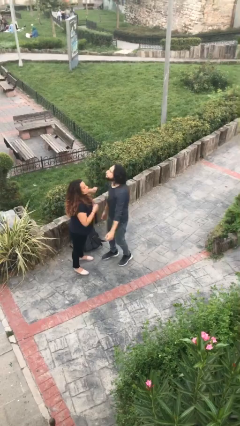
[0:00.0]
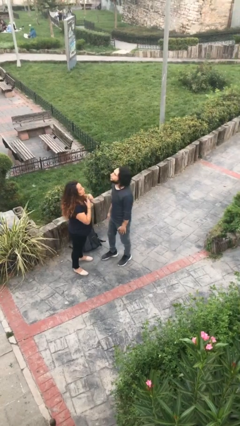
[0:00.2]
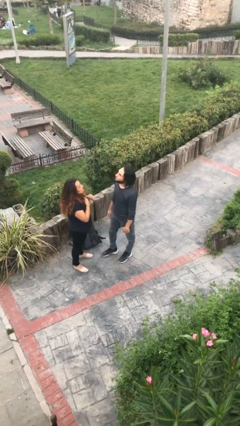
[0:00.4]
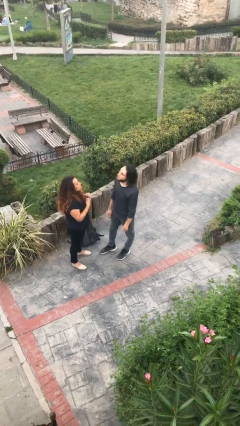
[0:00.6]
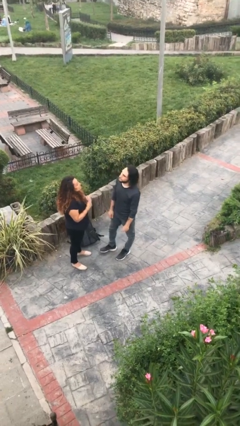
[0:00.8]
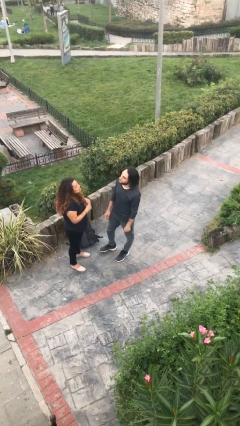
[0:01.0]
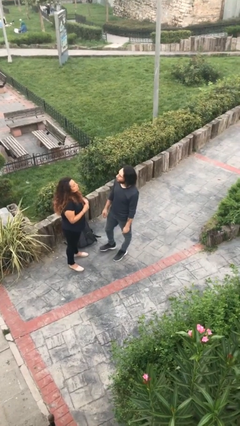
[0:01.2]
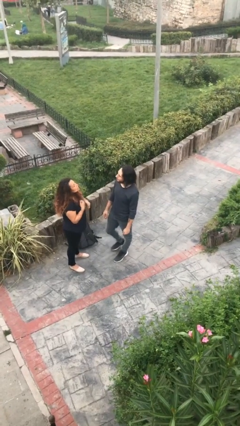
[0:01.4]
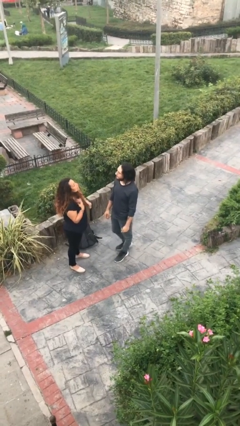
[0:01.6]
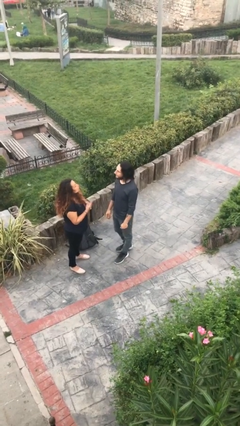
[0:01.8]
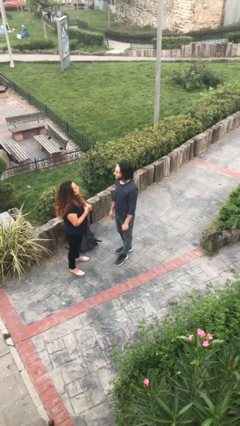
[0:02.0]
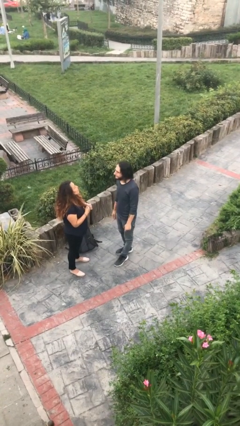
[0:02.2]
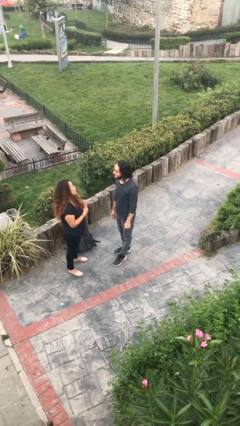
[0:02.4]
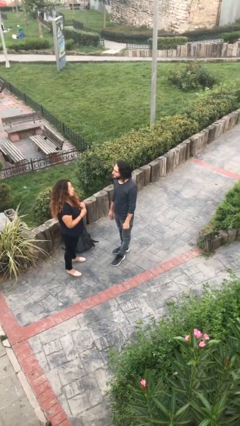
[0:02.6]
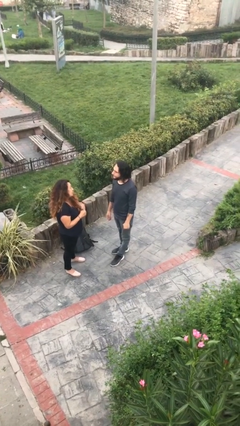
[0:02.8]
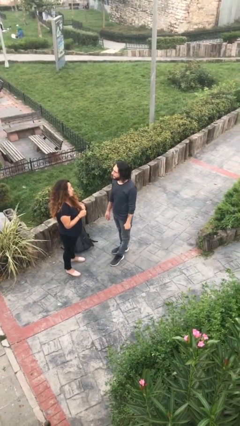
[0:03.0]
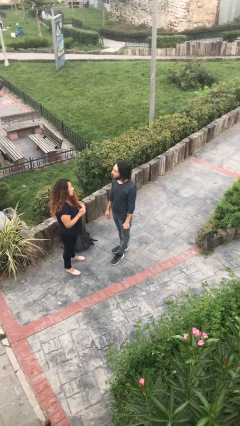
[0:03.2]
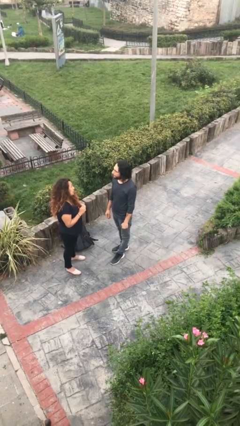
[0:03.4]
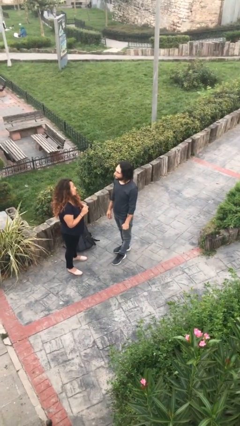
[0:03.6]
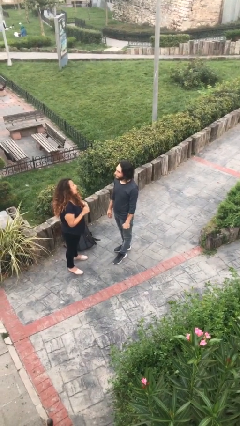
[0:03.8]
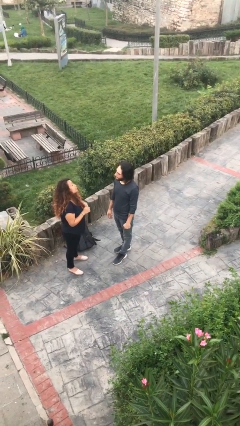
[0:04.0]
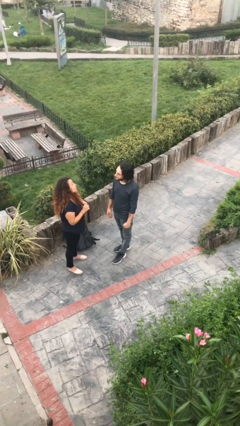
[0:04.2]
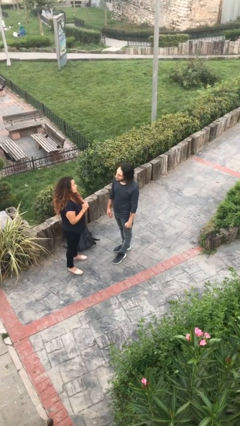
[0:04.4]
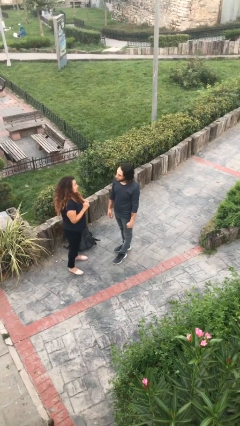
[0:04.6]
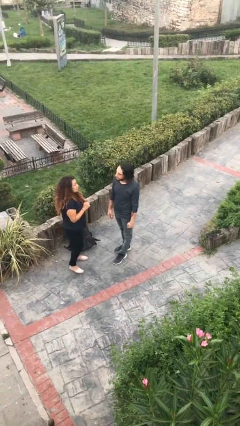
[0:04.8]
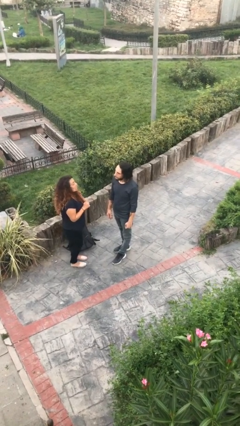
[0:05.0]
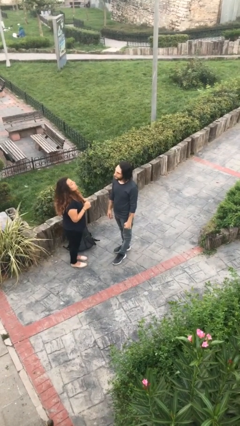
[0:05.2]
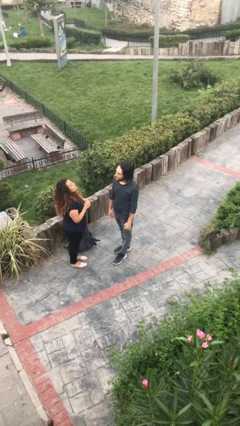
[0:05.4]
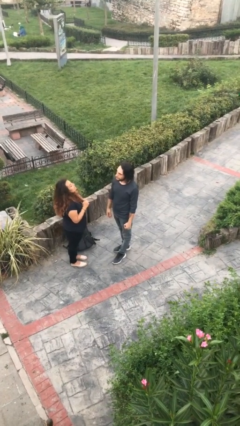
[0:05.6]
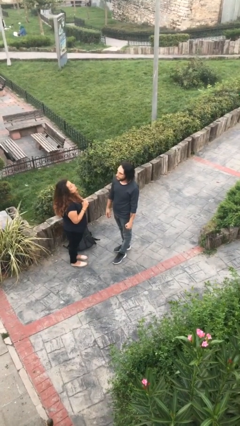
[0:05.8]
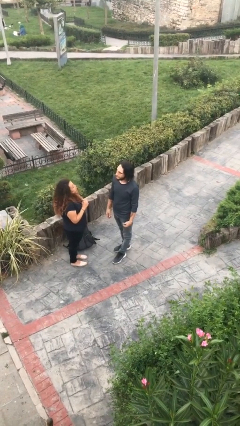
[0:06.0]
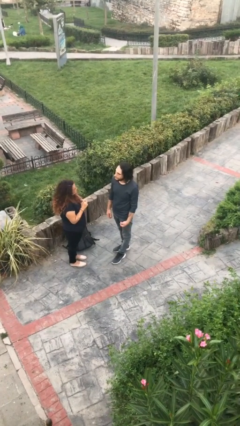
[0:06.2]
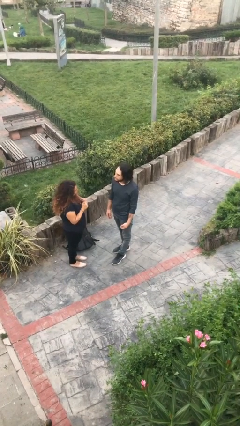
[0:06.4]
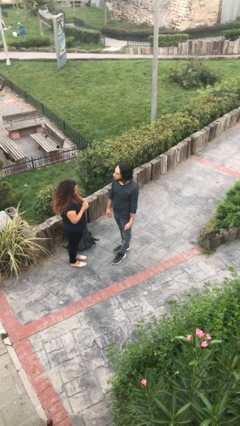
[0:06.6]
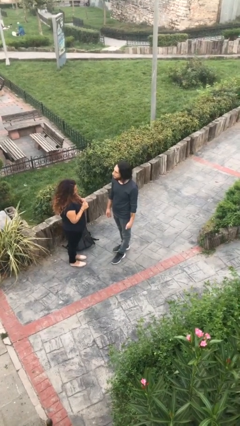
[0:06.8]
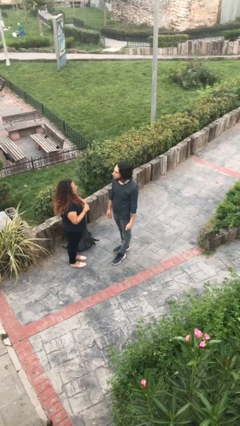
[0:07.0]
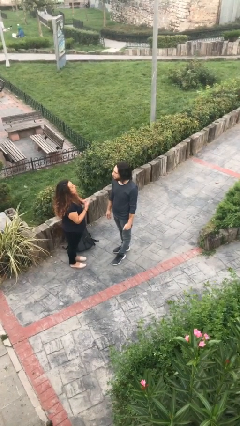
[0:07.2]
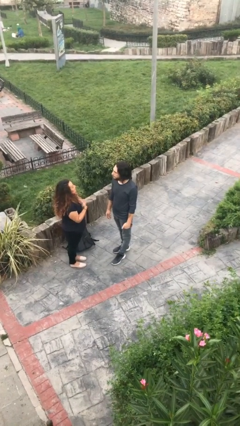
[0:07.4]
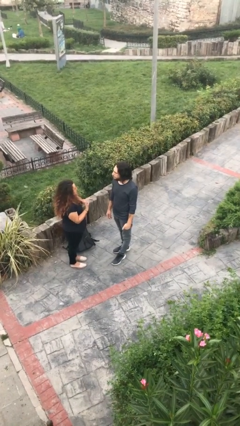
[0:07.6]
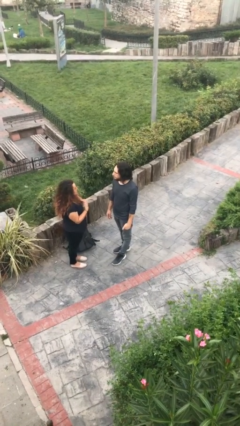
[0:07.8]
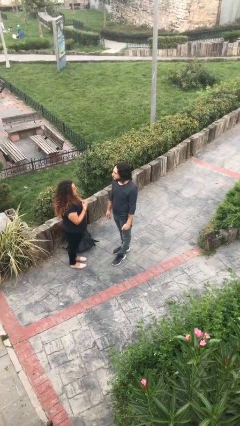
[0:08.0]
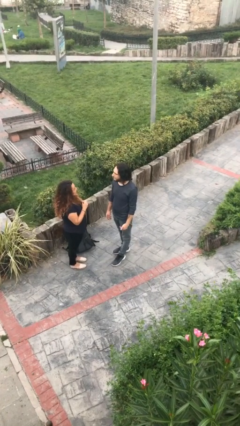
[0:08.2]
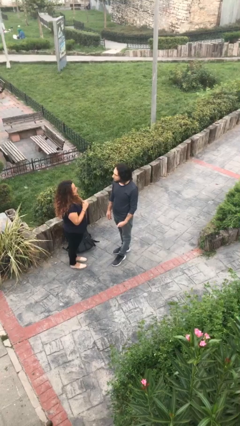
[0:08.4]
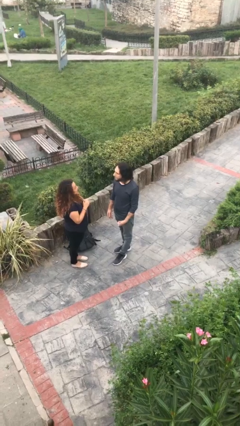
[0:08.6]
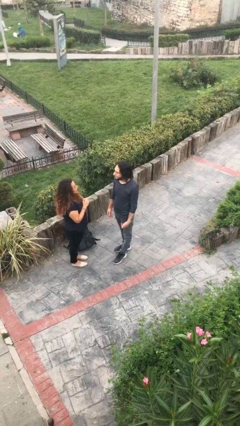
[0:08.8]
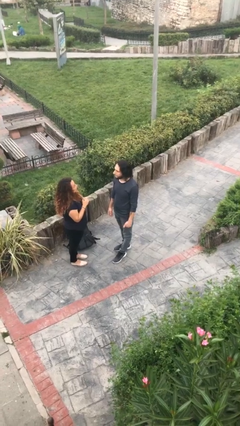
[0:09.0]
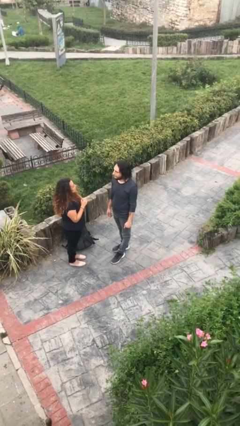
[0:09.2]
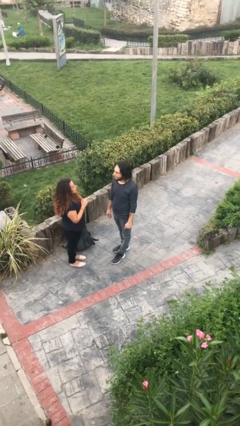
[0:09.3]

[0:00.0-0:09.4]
person talks to person

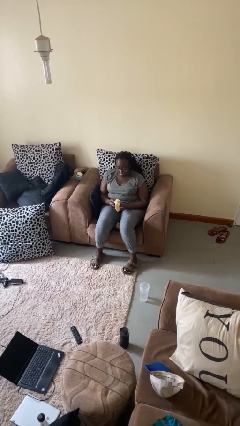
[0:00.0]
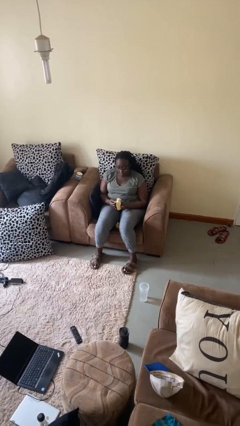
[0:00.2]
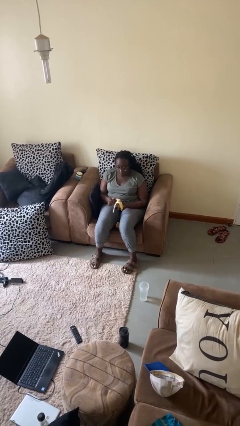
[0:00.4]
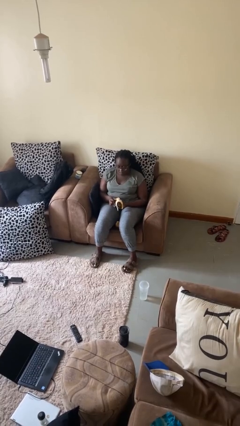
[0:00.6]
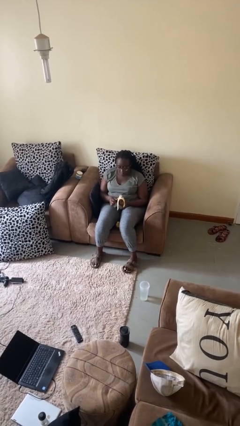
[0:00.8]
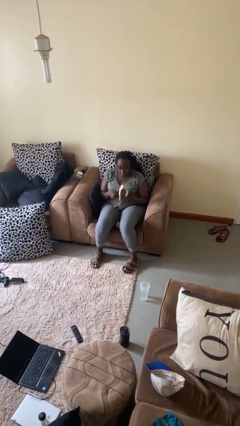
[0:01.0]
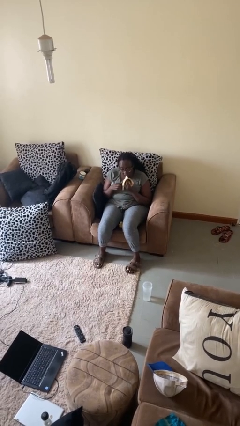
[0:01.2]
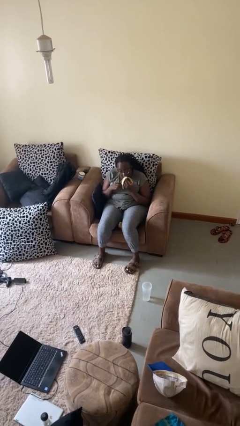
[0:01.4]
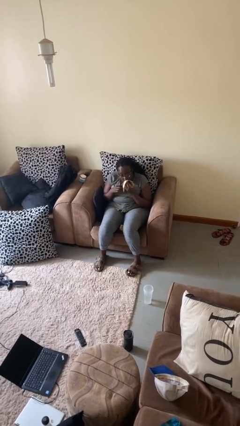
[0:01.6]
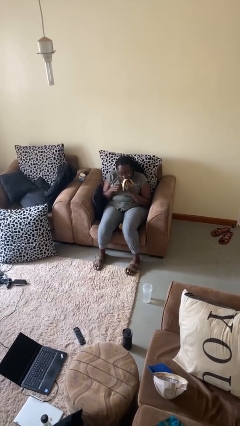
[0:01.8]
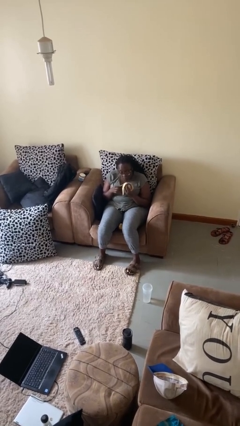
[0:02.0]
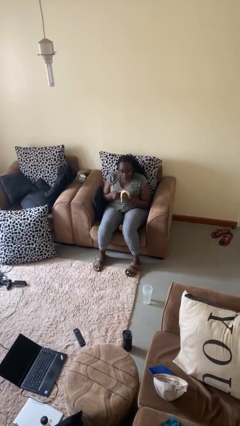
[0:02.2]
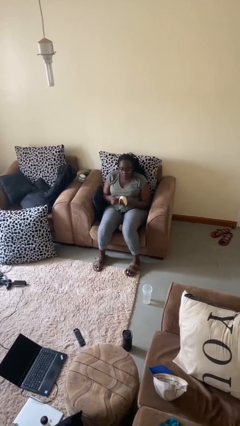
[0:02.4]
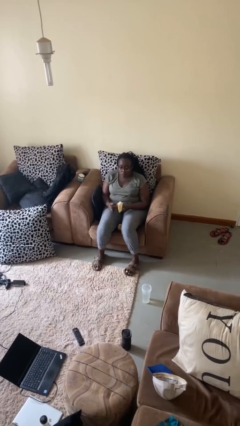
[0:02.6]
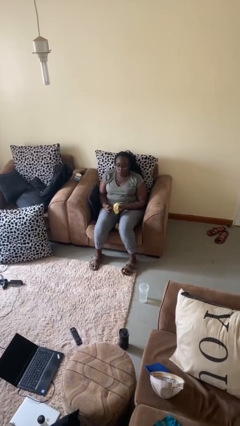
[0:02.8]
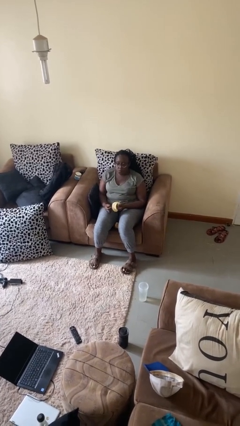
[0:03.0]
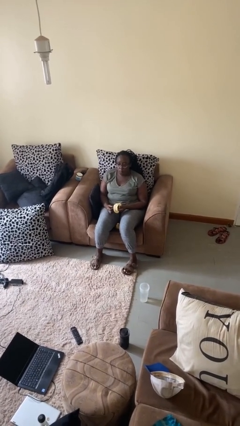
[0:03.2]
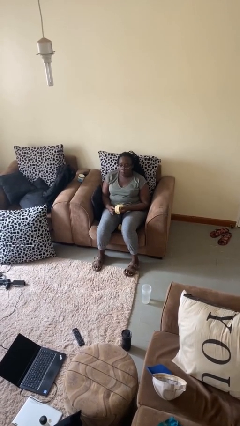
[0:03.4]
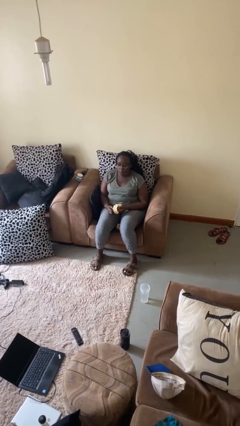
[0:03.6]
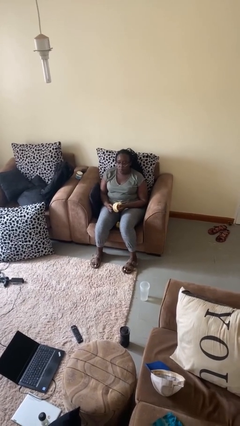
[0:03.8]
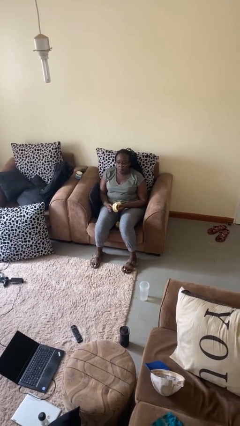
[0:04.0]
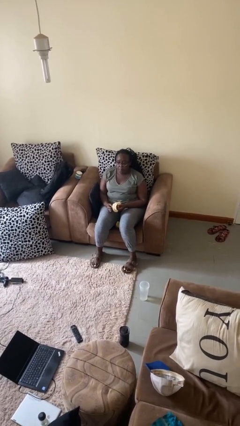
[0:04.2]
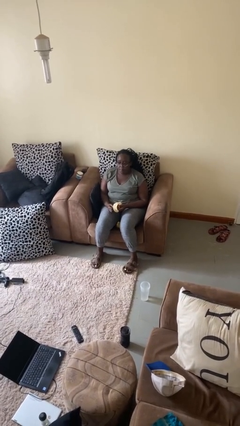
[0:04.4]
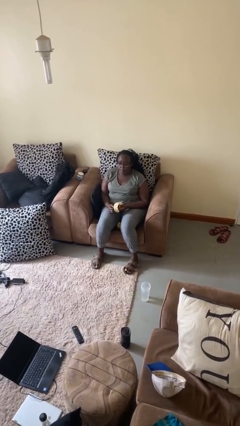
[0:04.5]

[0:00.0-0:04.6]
person eats banana

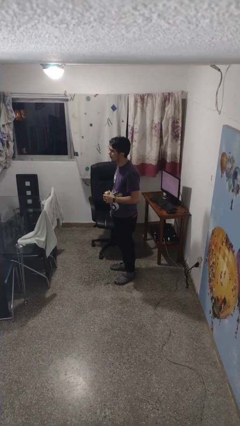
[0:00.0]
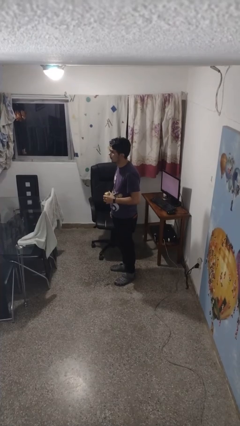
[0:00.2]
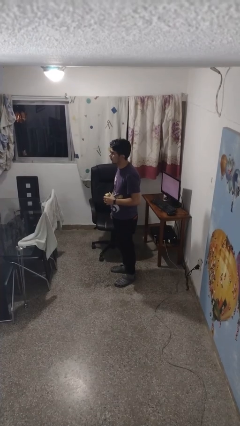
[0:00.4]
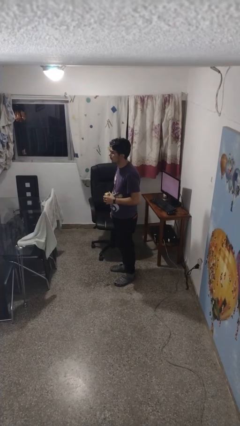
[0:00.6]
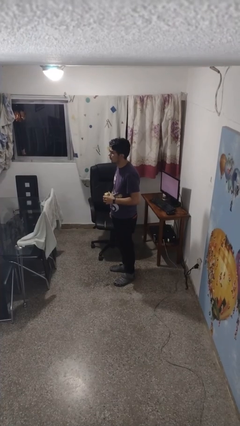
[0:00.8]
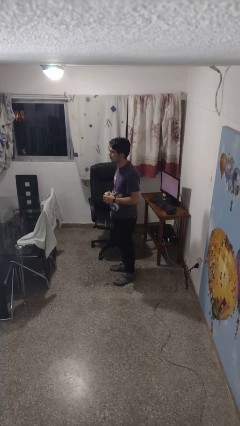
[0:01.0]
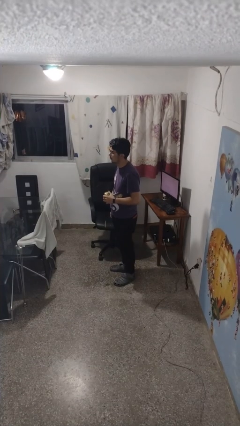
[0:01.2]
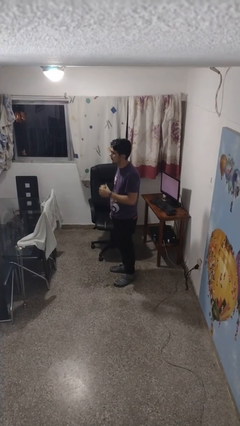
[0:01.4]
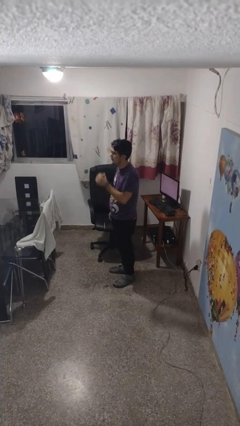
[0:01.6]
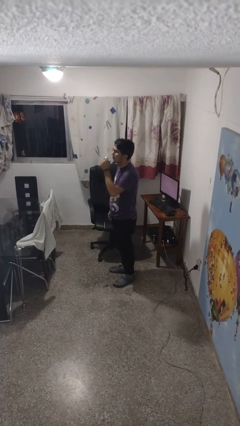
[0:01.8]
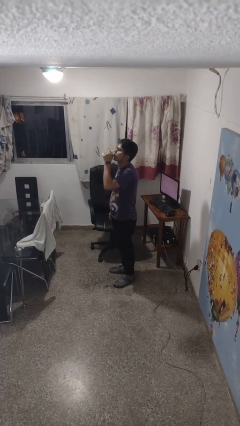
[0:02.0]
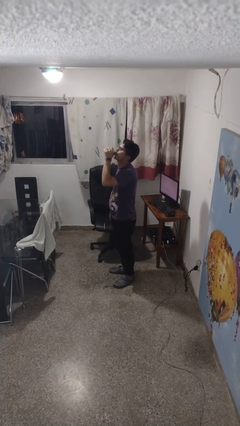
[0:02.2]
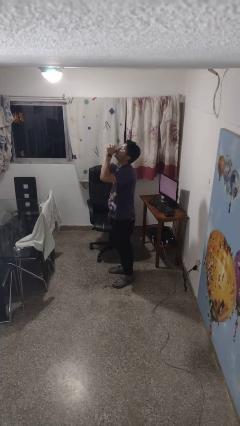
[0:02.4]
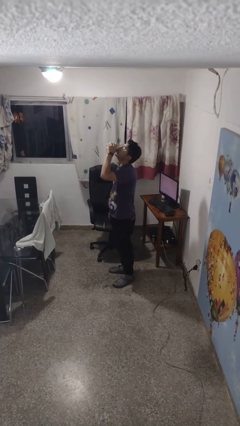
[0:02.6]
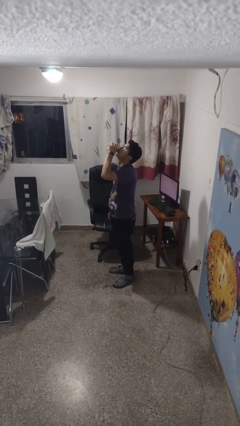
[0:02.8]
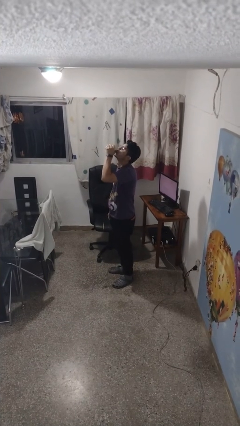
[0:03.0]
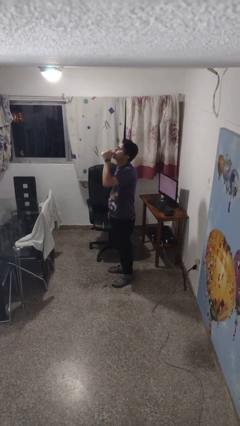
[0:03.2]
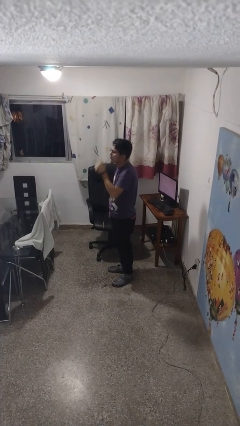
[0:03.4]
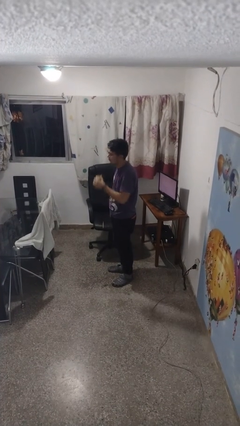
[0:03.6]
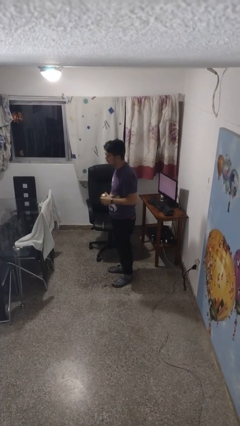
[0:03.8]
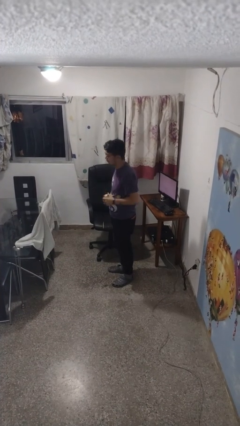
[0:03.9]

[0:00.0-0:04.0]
person drinks from beverage can
